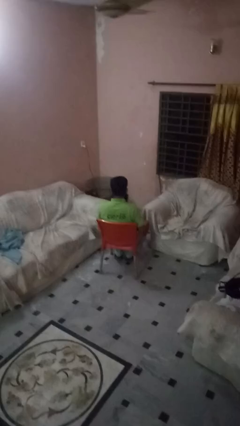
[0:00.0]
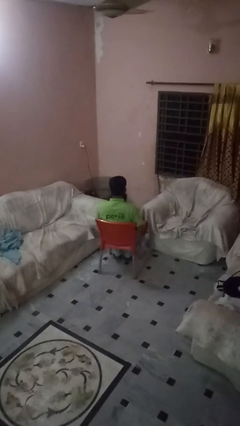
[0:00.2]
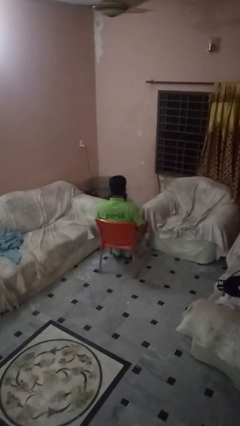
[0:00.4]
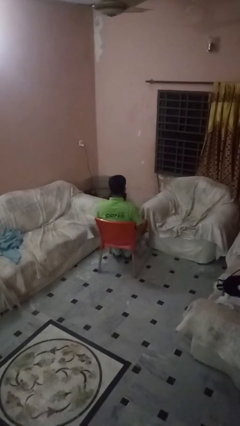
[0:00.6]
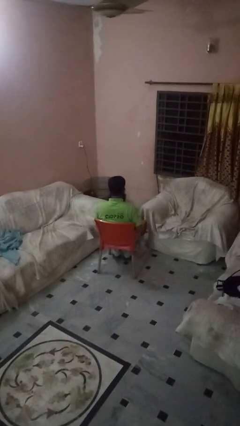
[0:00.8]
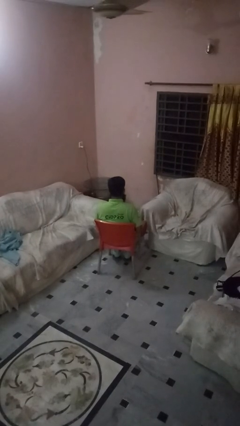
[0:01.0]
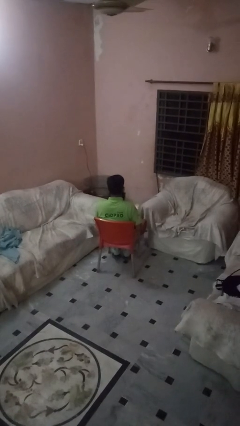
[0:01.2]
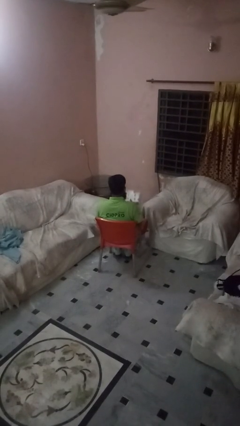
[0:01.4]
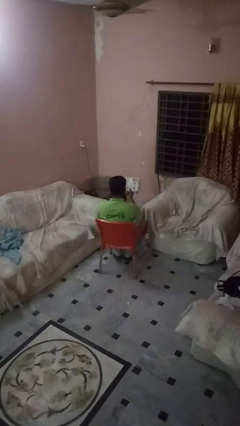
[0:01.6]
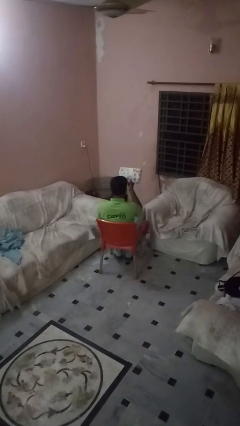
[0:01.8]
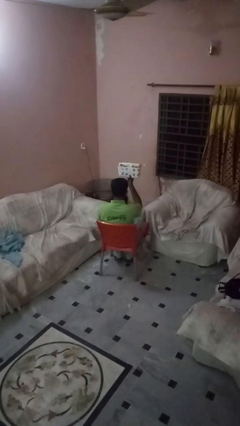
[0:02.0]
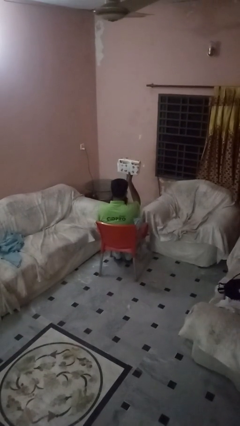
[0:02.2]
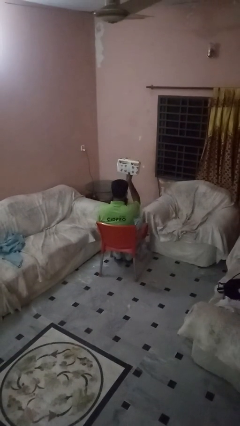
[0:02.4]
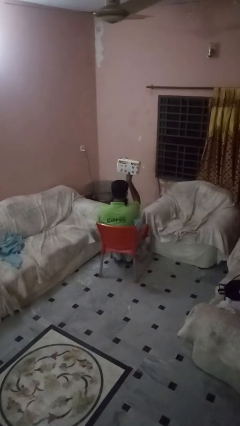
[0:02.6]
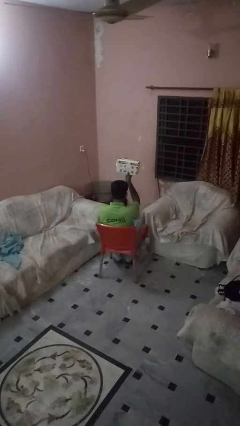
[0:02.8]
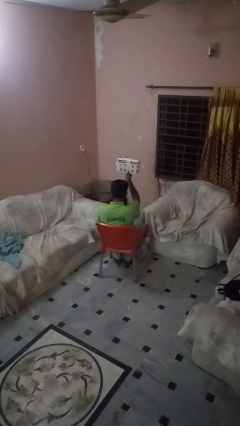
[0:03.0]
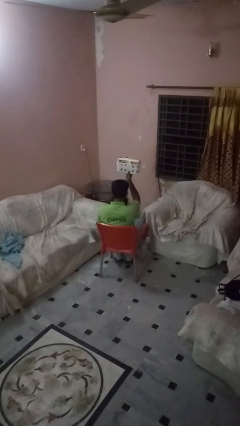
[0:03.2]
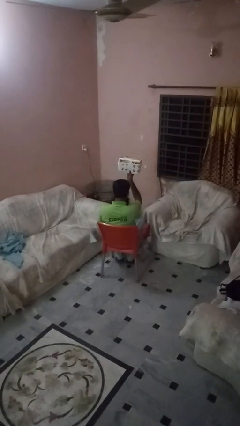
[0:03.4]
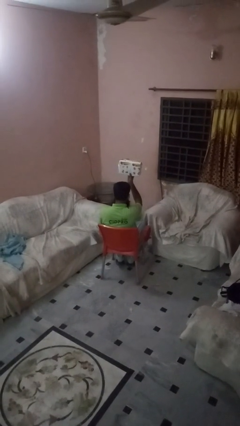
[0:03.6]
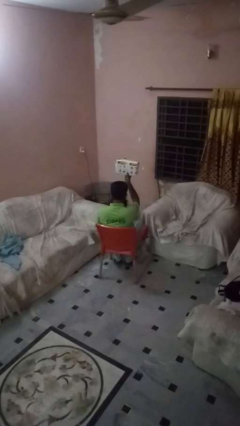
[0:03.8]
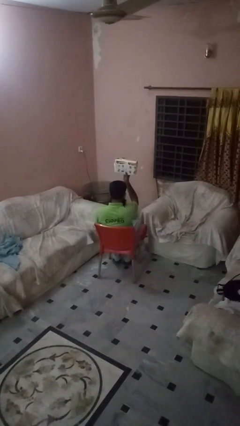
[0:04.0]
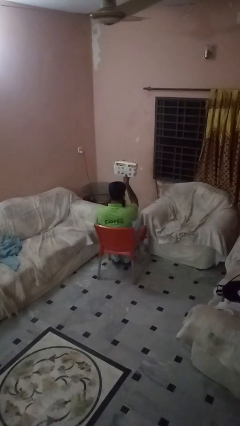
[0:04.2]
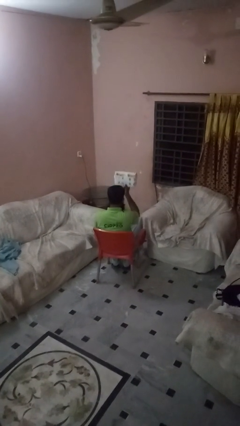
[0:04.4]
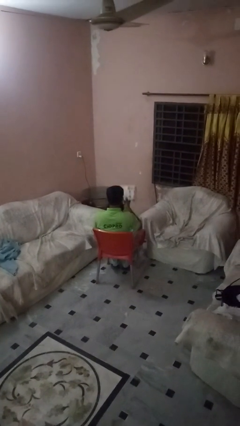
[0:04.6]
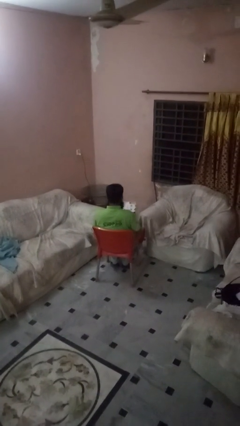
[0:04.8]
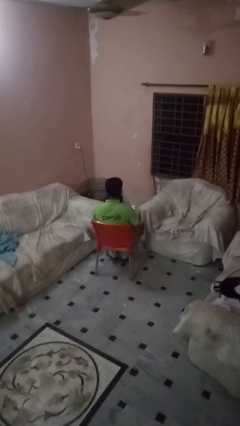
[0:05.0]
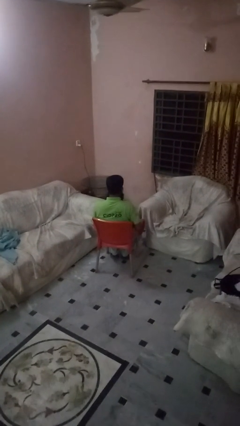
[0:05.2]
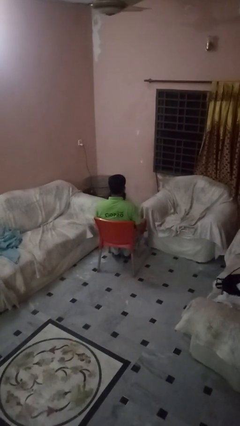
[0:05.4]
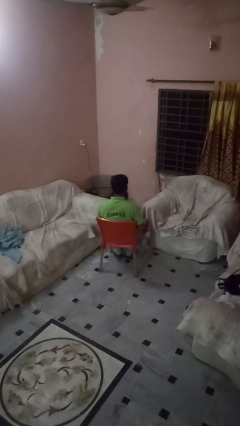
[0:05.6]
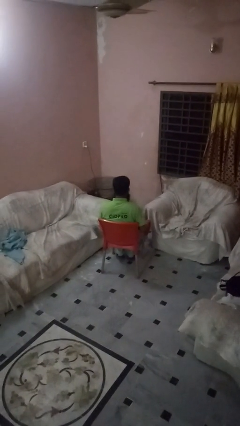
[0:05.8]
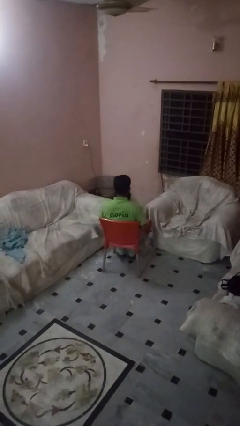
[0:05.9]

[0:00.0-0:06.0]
person holds object above head

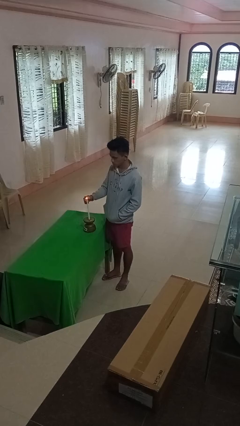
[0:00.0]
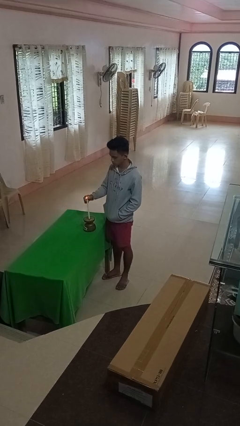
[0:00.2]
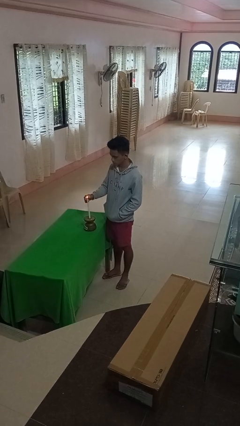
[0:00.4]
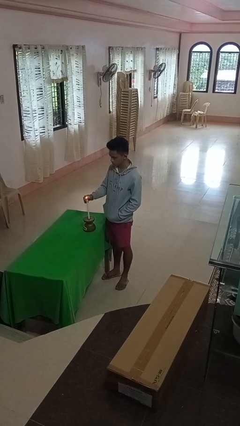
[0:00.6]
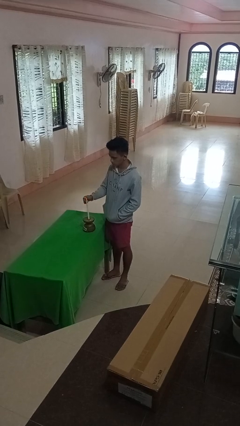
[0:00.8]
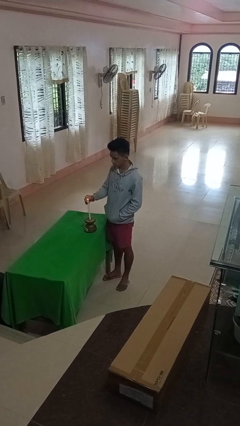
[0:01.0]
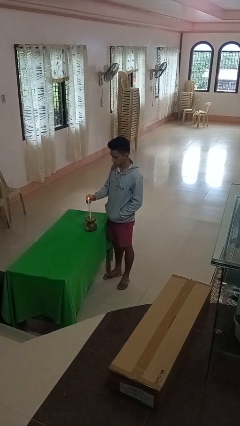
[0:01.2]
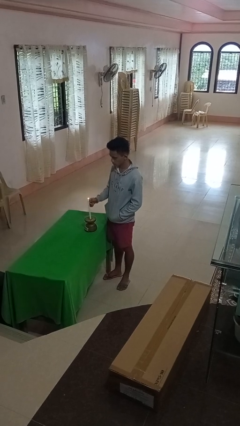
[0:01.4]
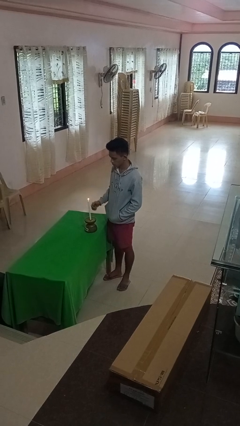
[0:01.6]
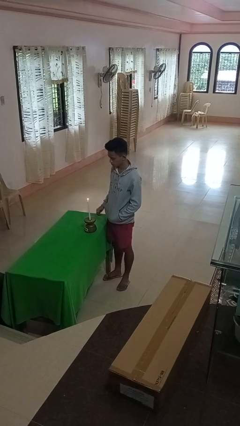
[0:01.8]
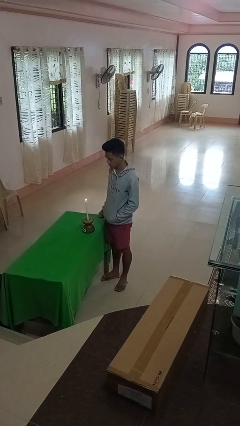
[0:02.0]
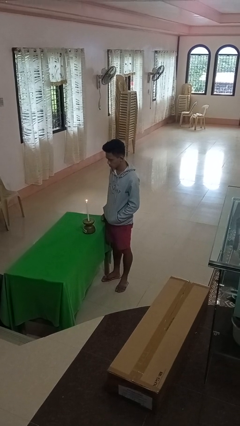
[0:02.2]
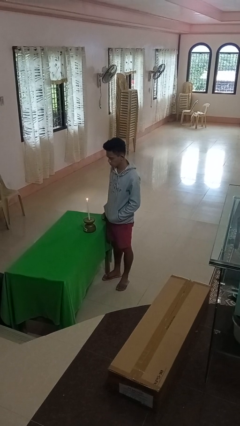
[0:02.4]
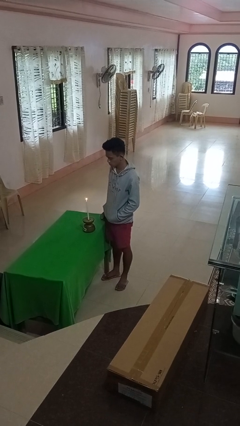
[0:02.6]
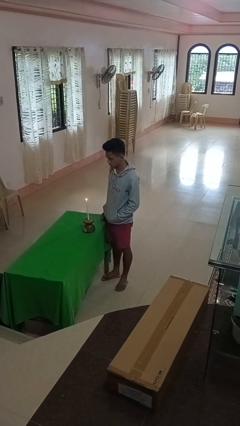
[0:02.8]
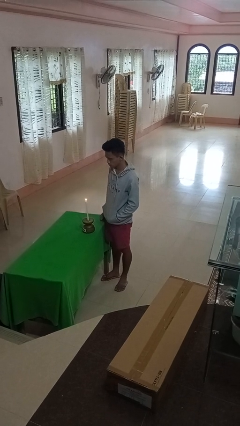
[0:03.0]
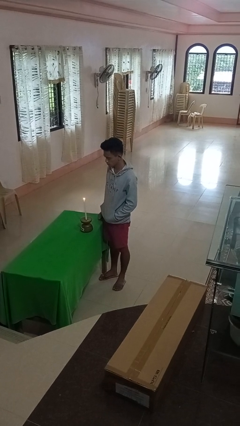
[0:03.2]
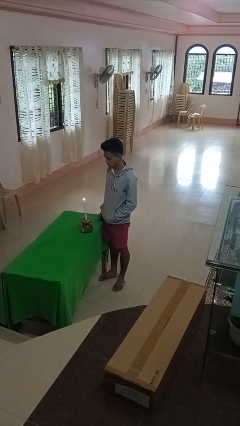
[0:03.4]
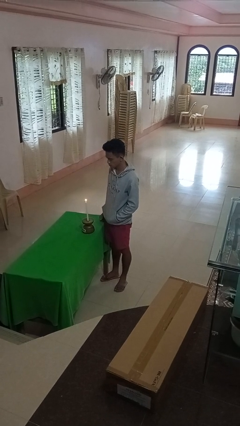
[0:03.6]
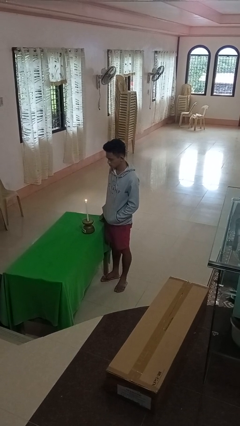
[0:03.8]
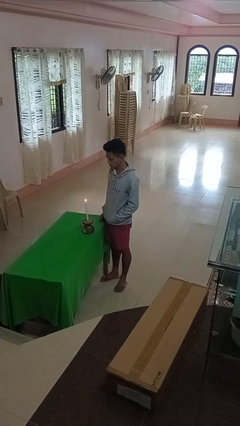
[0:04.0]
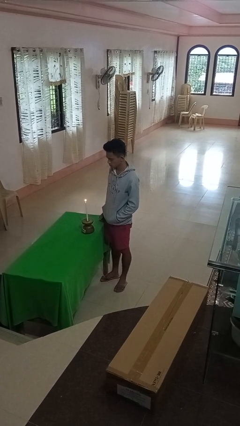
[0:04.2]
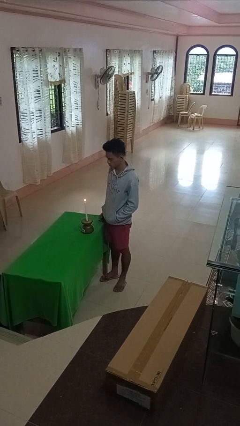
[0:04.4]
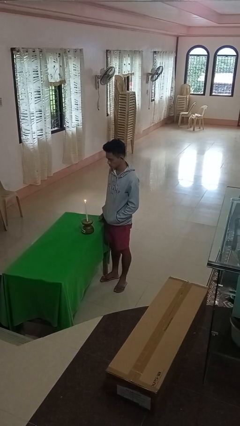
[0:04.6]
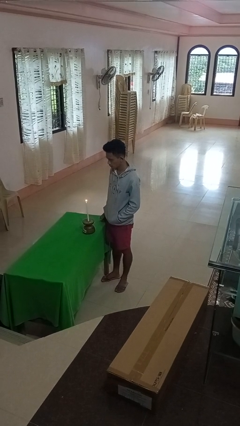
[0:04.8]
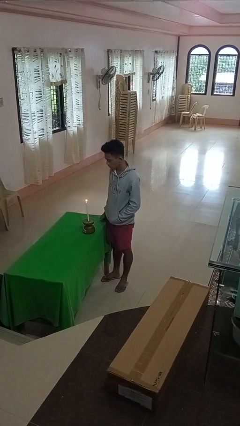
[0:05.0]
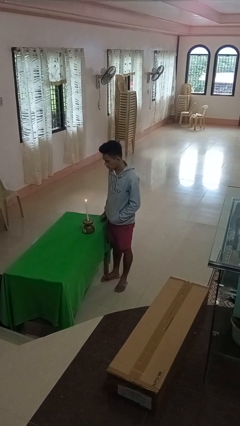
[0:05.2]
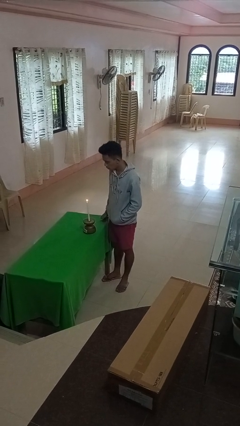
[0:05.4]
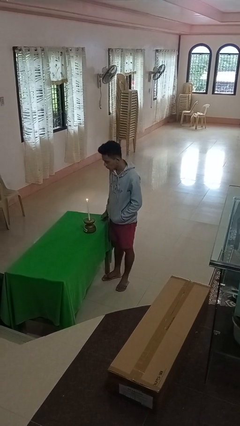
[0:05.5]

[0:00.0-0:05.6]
person lights candle

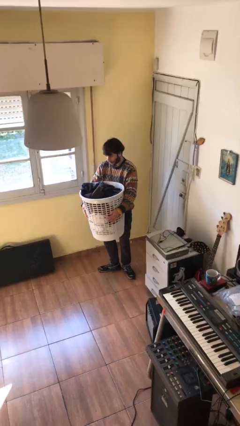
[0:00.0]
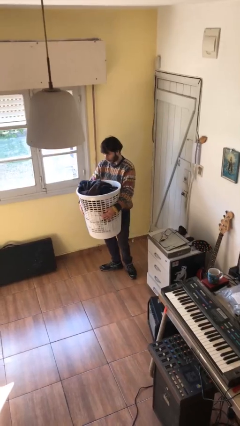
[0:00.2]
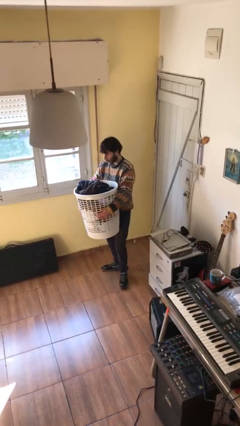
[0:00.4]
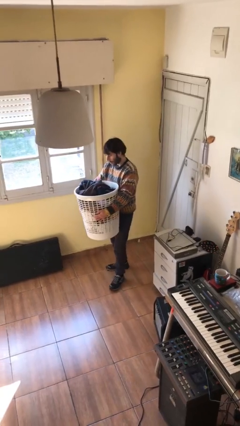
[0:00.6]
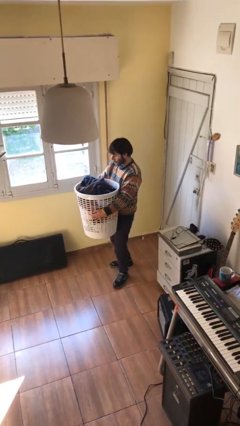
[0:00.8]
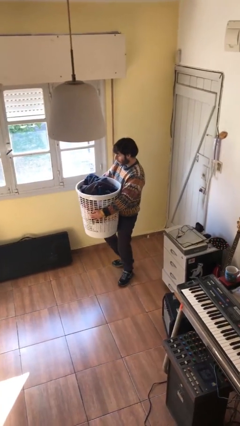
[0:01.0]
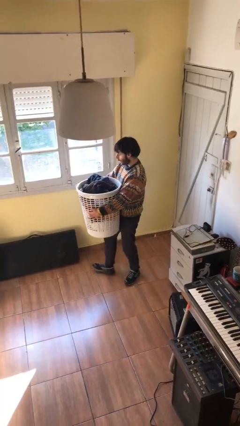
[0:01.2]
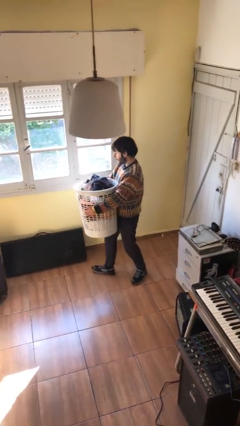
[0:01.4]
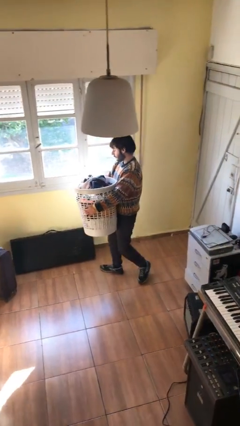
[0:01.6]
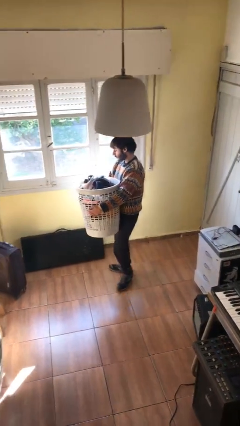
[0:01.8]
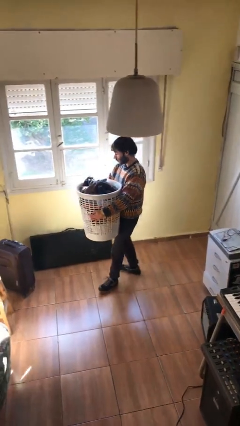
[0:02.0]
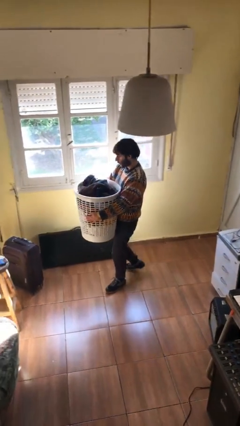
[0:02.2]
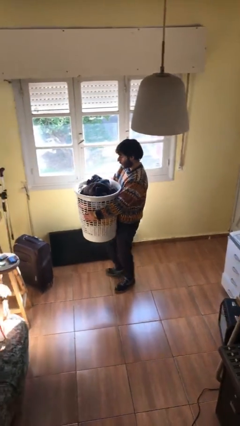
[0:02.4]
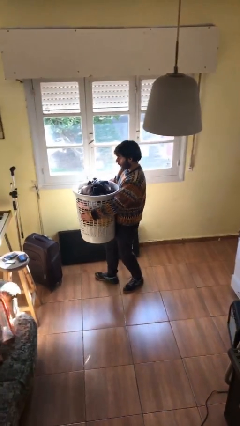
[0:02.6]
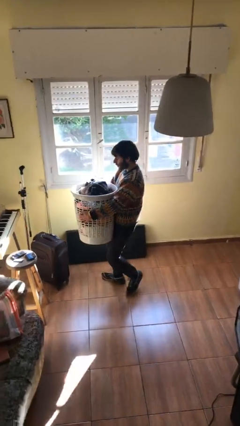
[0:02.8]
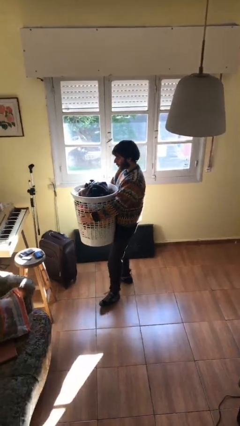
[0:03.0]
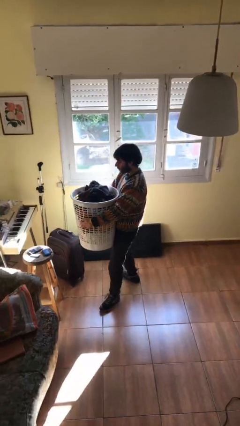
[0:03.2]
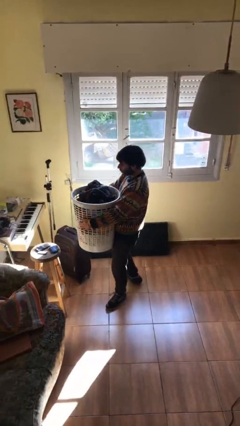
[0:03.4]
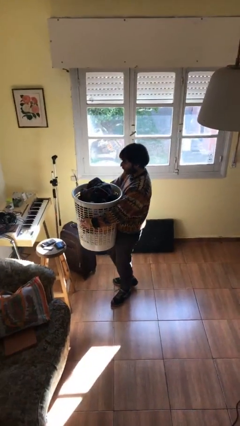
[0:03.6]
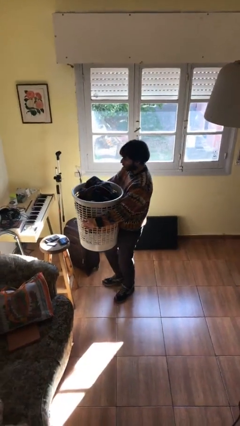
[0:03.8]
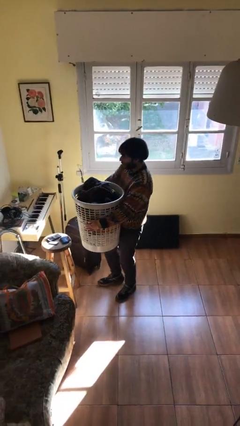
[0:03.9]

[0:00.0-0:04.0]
person carries laundry basket

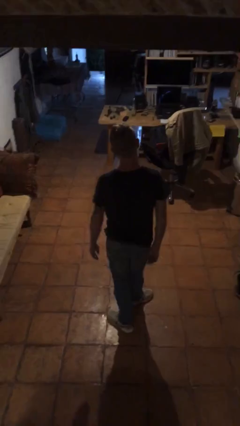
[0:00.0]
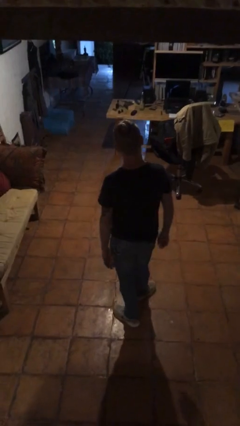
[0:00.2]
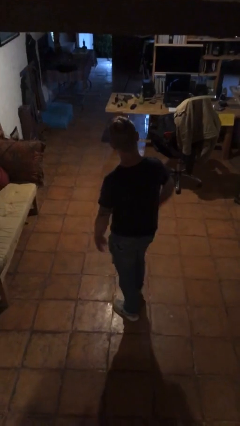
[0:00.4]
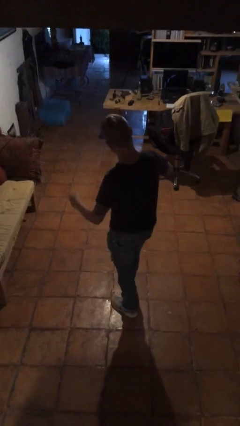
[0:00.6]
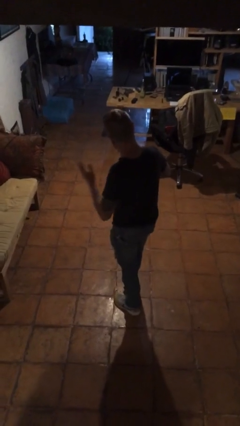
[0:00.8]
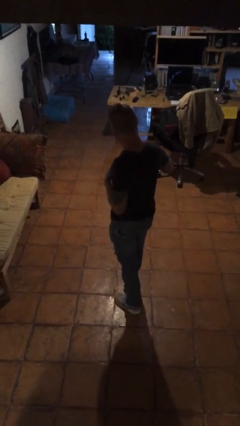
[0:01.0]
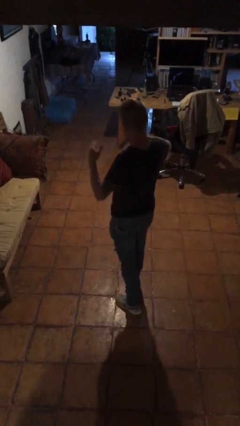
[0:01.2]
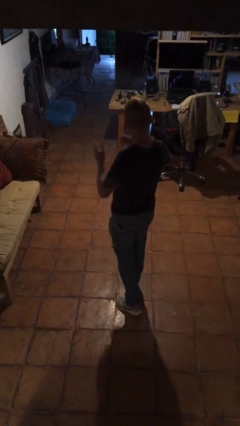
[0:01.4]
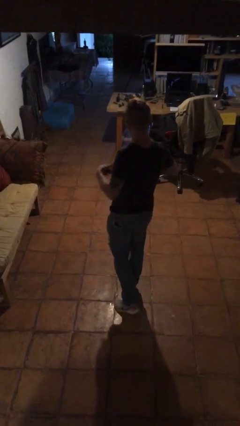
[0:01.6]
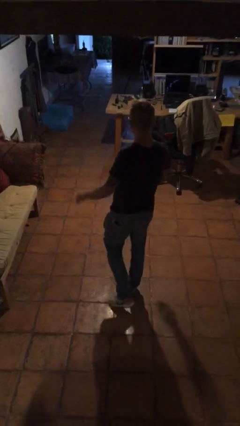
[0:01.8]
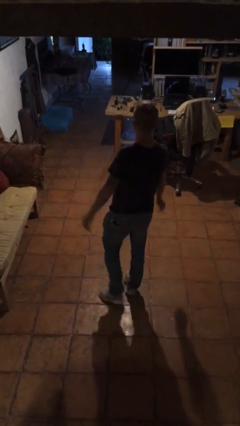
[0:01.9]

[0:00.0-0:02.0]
person drums on chest
